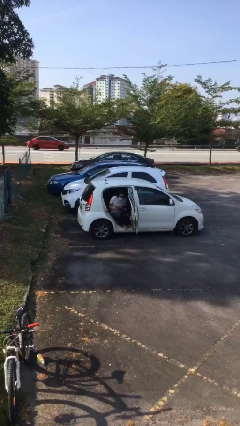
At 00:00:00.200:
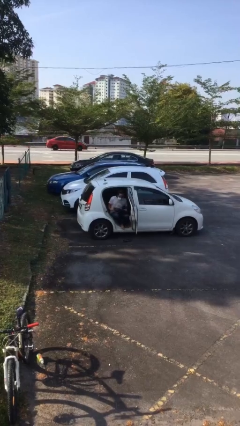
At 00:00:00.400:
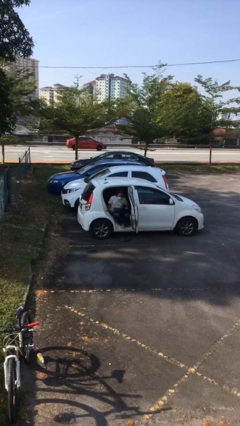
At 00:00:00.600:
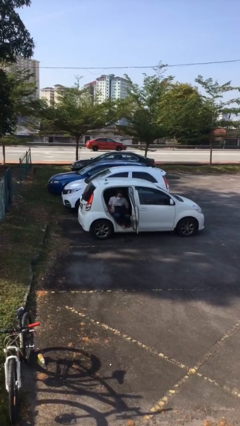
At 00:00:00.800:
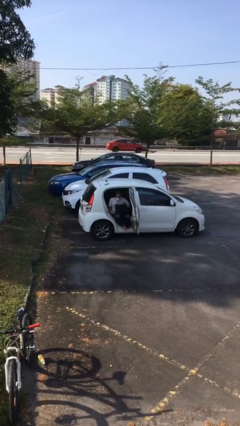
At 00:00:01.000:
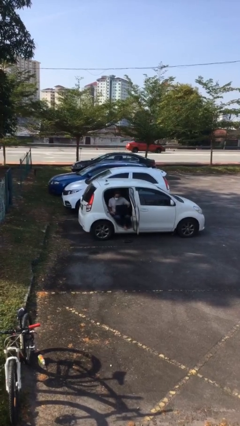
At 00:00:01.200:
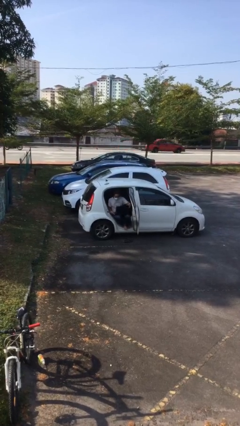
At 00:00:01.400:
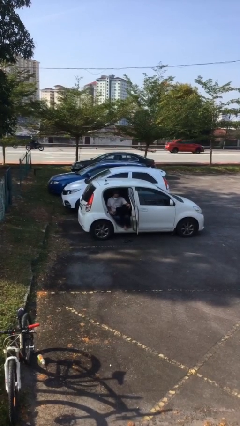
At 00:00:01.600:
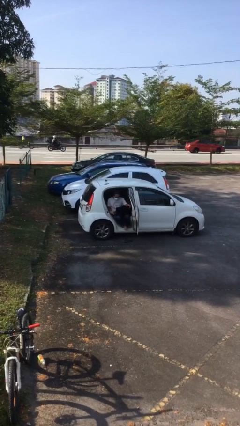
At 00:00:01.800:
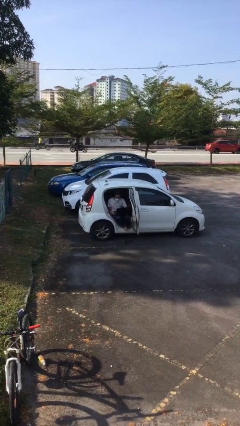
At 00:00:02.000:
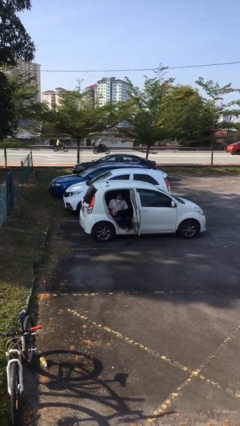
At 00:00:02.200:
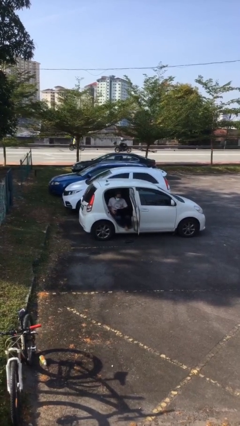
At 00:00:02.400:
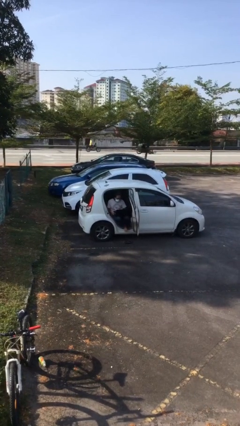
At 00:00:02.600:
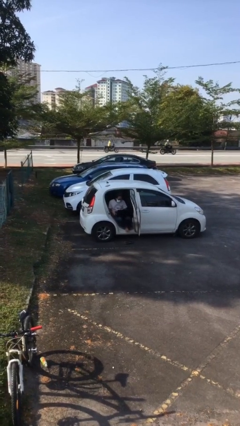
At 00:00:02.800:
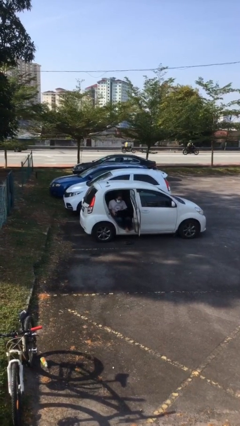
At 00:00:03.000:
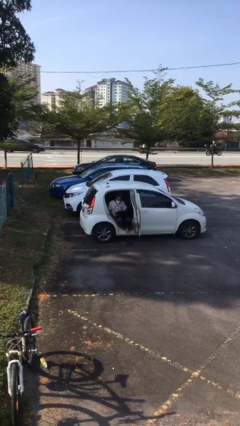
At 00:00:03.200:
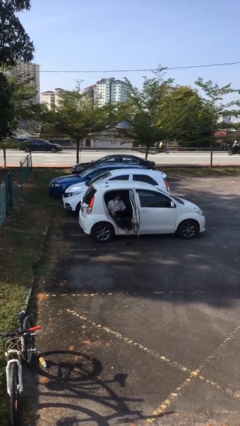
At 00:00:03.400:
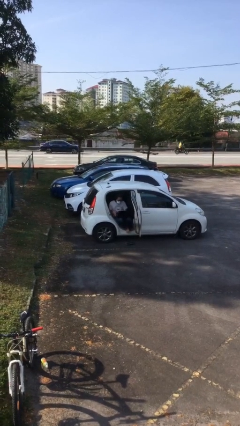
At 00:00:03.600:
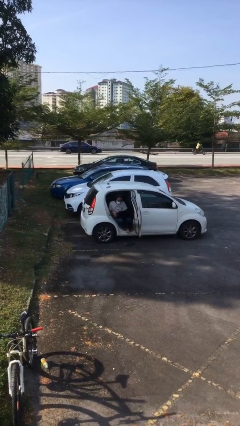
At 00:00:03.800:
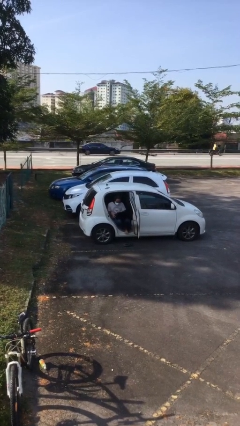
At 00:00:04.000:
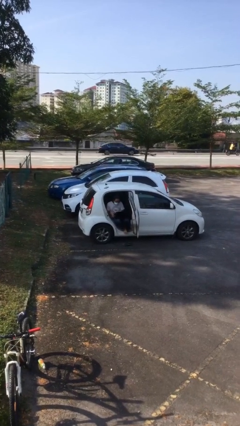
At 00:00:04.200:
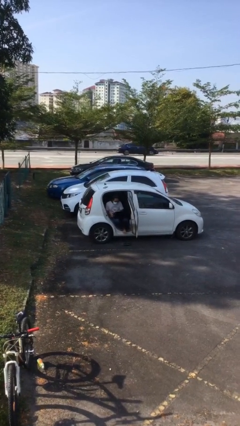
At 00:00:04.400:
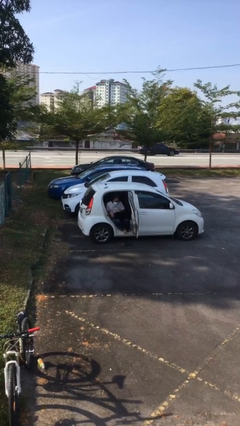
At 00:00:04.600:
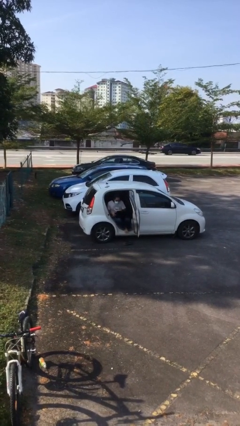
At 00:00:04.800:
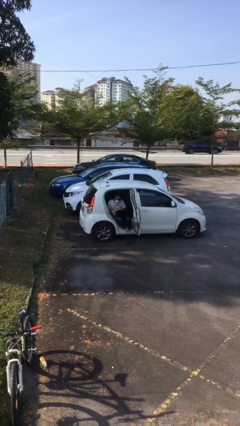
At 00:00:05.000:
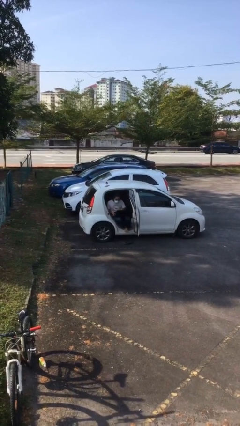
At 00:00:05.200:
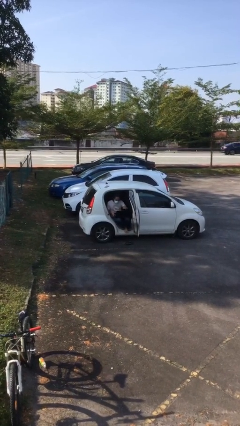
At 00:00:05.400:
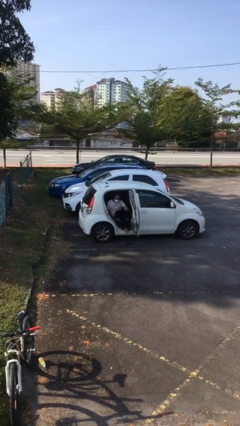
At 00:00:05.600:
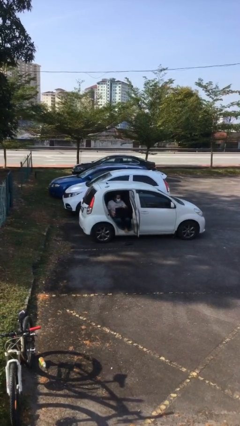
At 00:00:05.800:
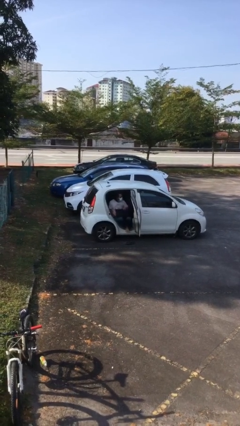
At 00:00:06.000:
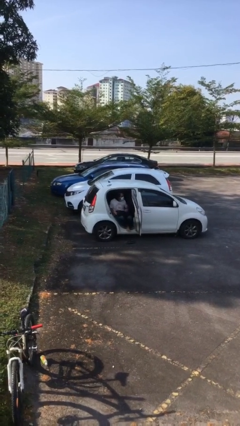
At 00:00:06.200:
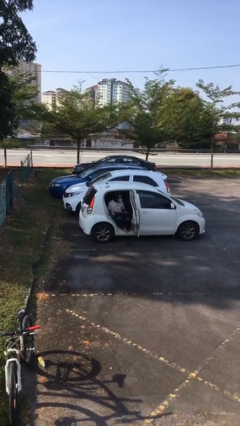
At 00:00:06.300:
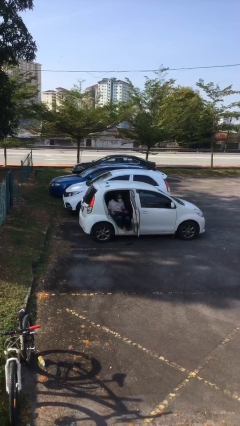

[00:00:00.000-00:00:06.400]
person interacts with laptop

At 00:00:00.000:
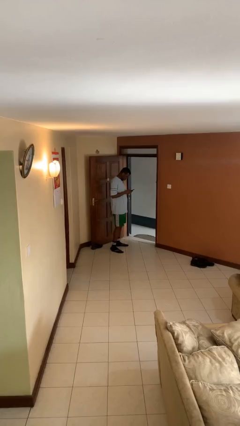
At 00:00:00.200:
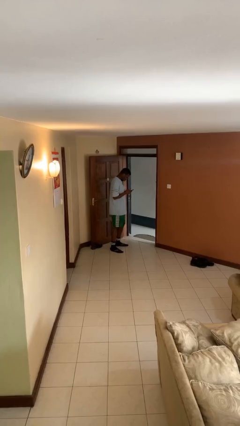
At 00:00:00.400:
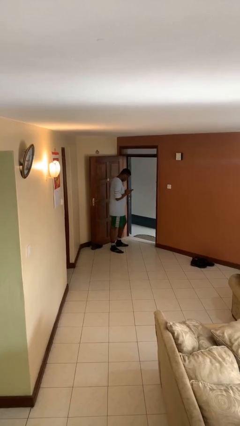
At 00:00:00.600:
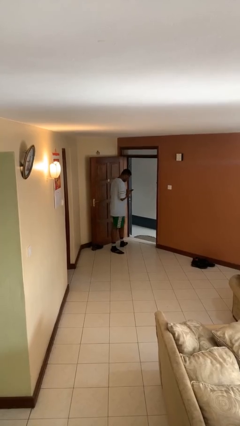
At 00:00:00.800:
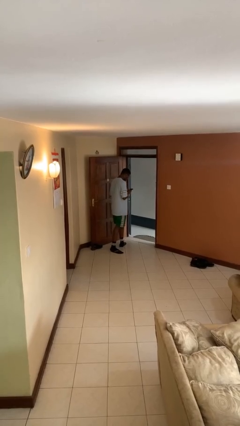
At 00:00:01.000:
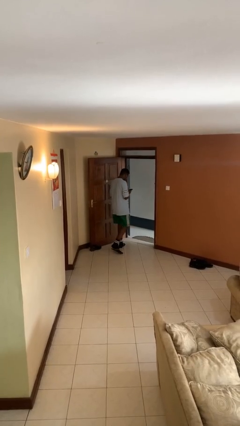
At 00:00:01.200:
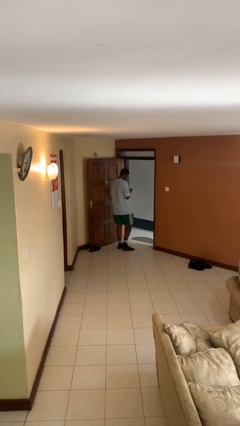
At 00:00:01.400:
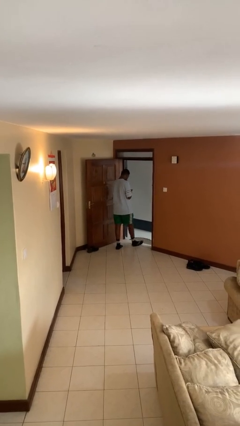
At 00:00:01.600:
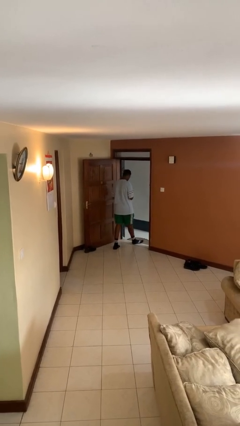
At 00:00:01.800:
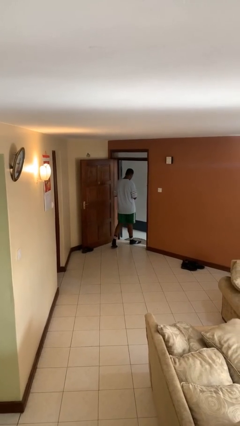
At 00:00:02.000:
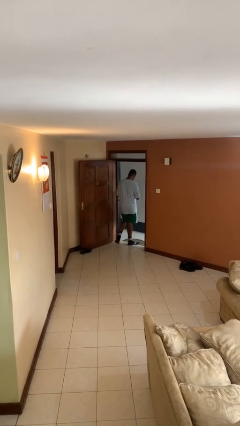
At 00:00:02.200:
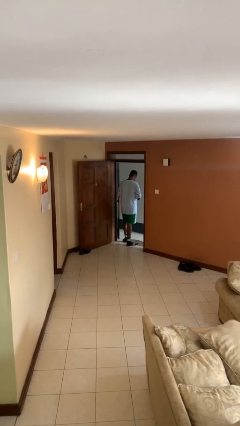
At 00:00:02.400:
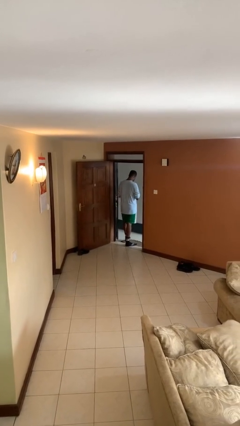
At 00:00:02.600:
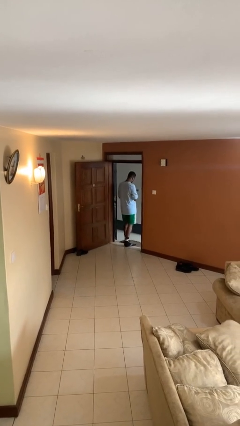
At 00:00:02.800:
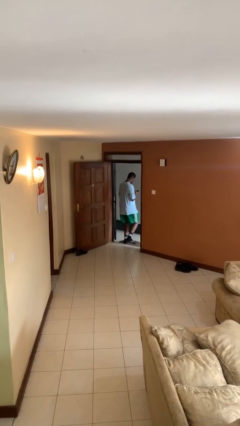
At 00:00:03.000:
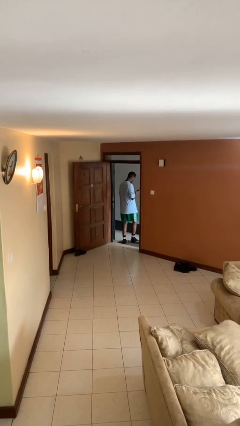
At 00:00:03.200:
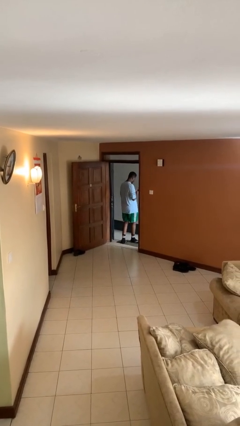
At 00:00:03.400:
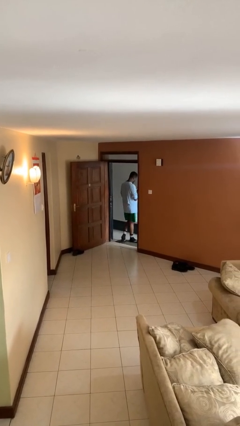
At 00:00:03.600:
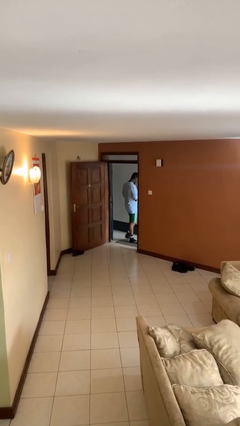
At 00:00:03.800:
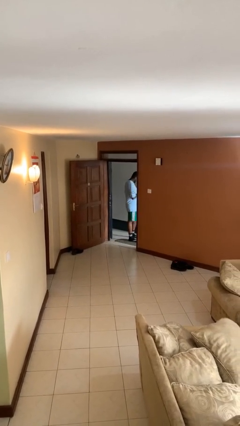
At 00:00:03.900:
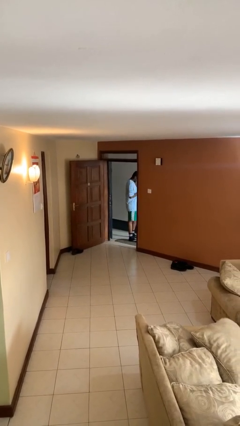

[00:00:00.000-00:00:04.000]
person exits scene through structure

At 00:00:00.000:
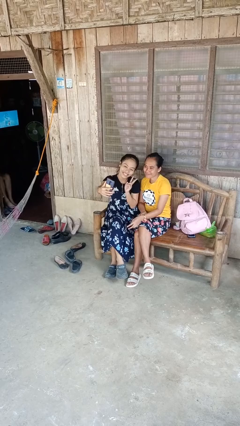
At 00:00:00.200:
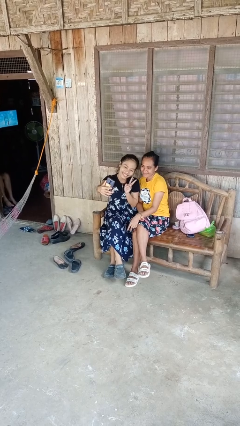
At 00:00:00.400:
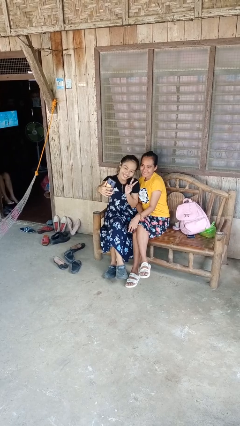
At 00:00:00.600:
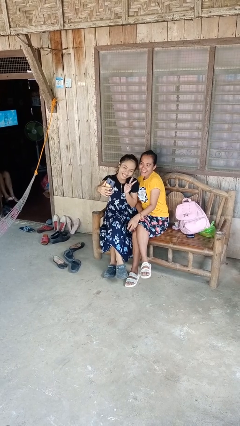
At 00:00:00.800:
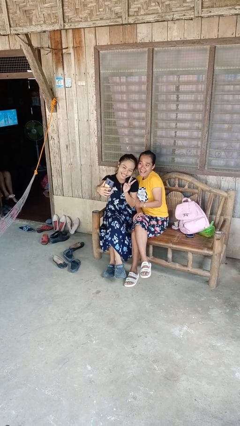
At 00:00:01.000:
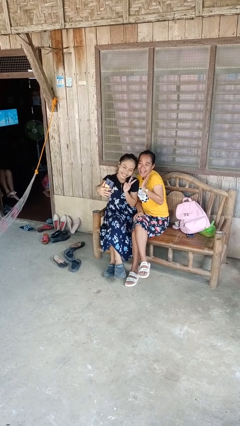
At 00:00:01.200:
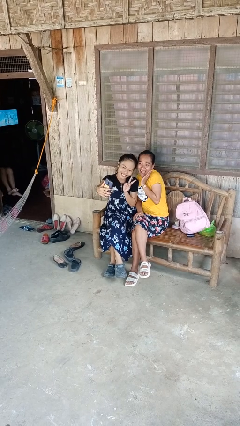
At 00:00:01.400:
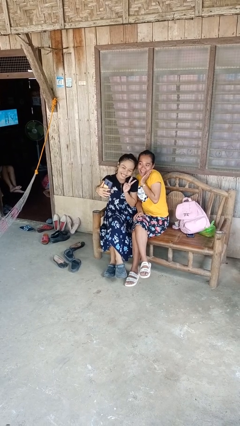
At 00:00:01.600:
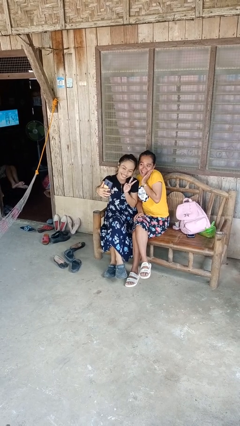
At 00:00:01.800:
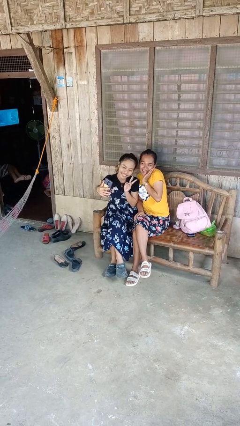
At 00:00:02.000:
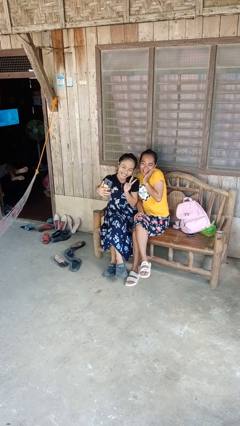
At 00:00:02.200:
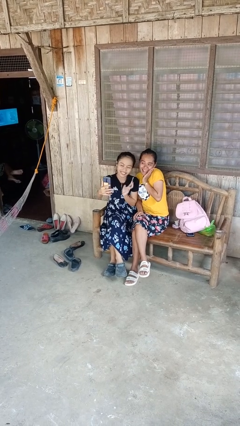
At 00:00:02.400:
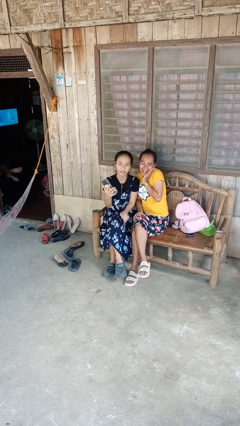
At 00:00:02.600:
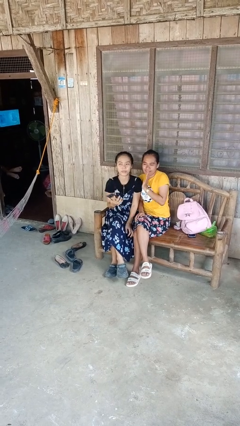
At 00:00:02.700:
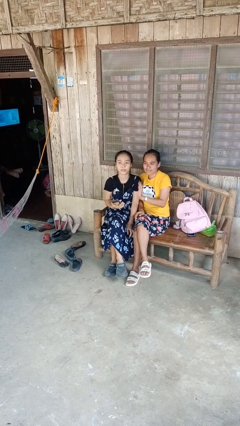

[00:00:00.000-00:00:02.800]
person takes selfie with person

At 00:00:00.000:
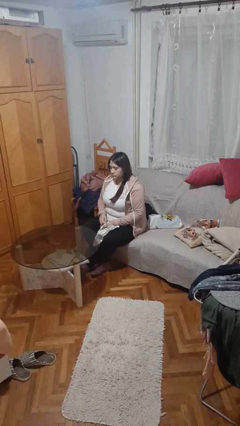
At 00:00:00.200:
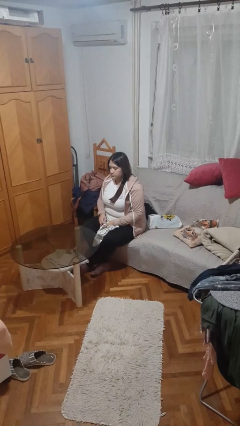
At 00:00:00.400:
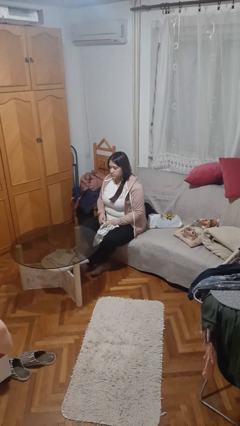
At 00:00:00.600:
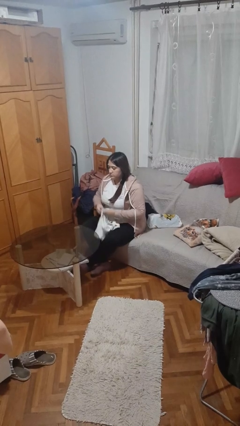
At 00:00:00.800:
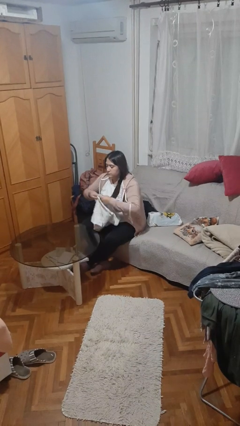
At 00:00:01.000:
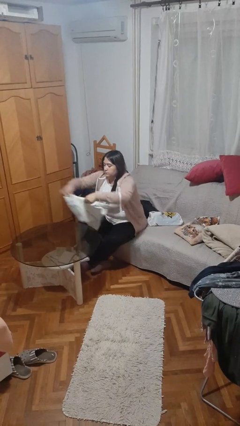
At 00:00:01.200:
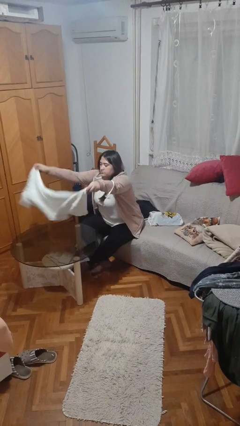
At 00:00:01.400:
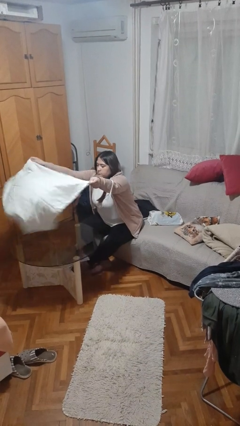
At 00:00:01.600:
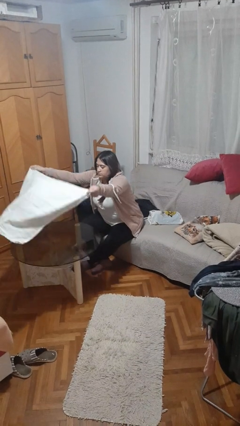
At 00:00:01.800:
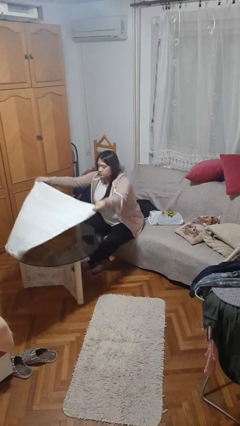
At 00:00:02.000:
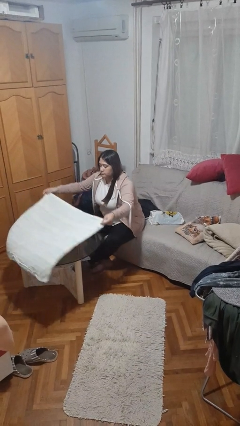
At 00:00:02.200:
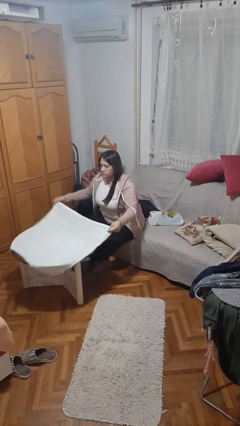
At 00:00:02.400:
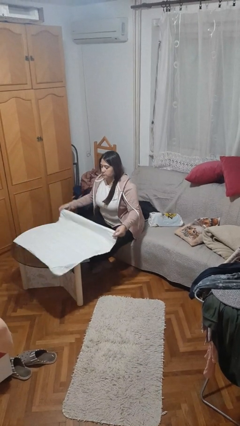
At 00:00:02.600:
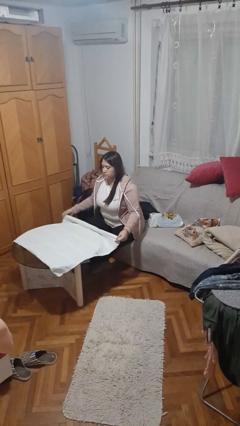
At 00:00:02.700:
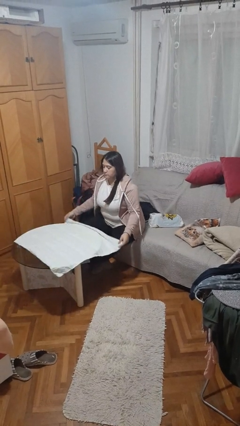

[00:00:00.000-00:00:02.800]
person spreads tablecloth

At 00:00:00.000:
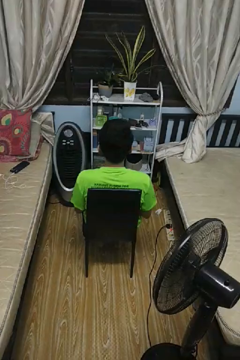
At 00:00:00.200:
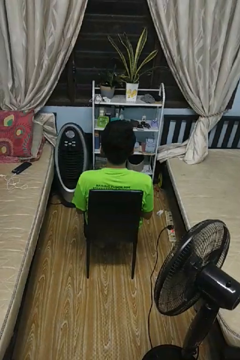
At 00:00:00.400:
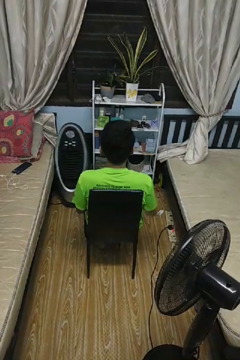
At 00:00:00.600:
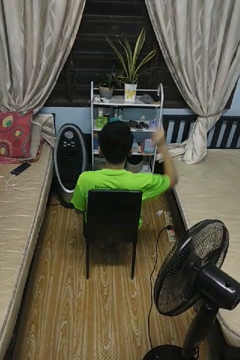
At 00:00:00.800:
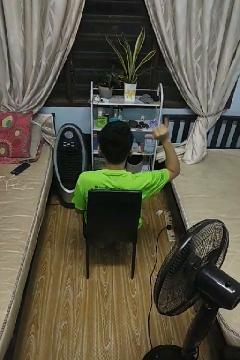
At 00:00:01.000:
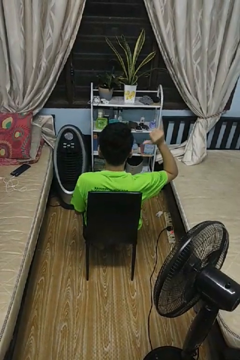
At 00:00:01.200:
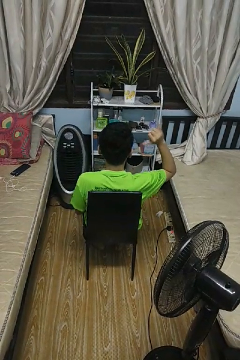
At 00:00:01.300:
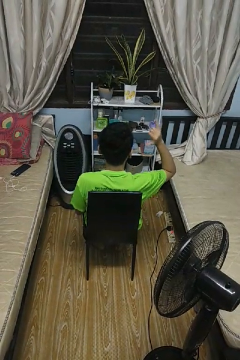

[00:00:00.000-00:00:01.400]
person gestures hang loose
